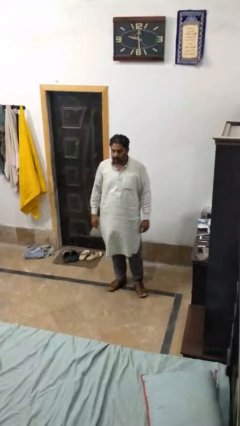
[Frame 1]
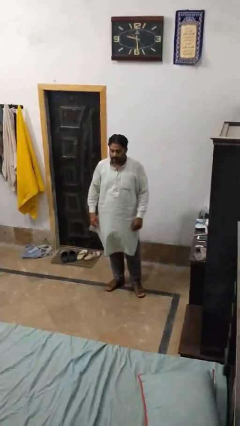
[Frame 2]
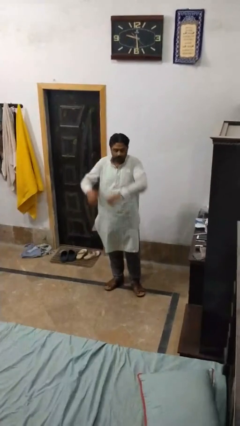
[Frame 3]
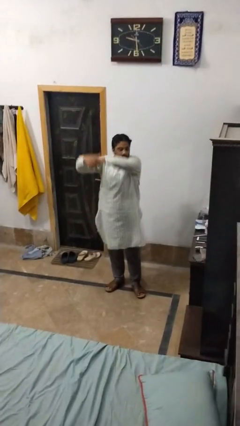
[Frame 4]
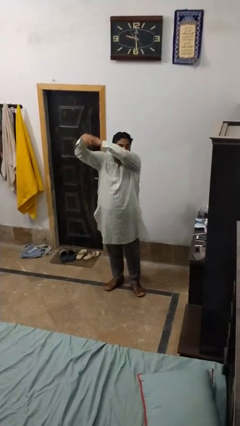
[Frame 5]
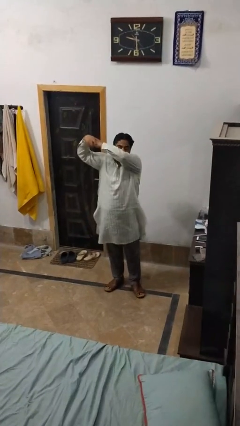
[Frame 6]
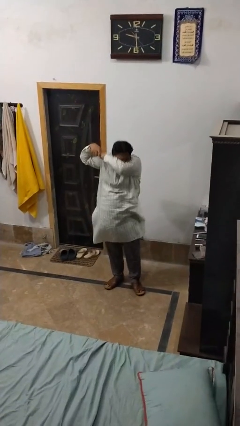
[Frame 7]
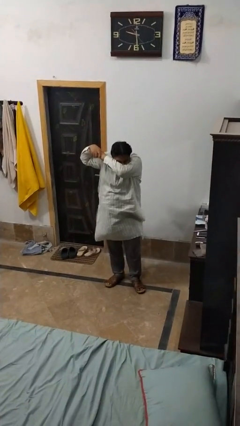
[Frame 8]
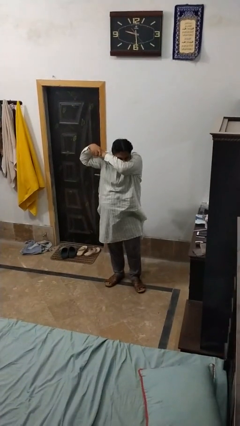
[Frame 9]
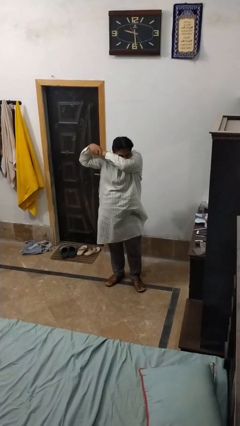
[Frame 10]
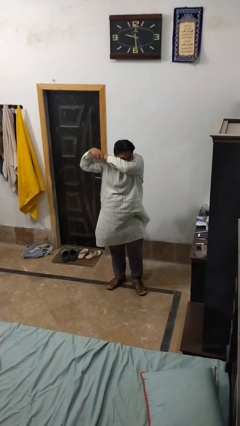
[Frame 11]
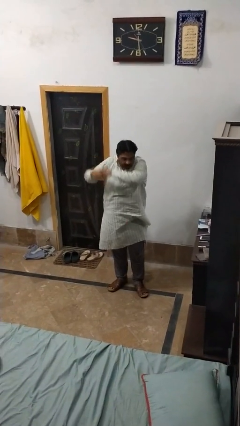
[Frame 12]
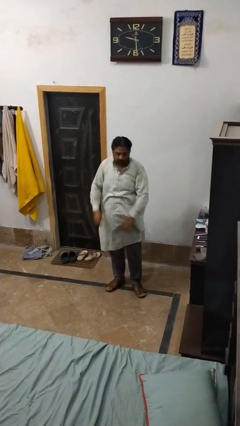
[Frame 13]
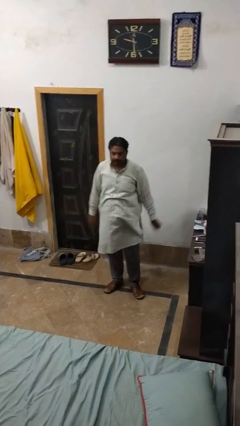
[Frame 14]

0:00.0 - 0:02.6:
person sneezes into arm

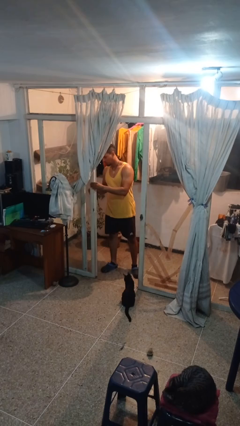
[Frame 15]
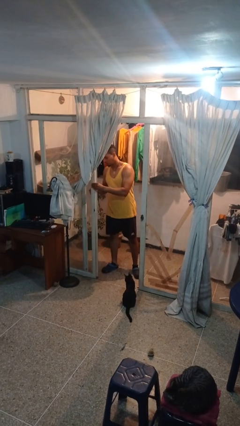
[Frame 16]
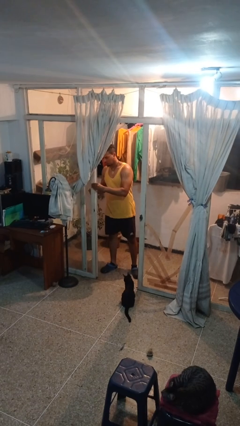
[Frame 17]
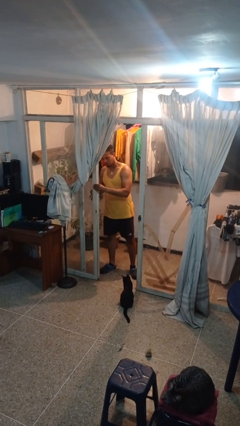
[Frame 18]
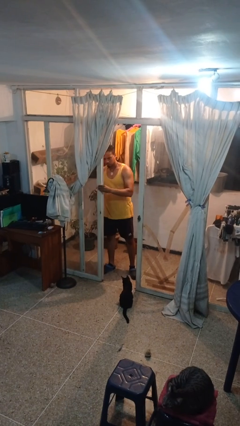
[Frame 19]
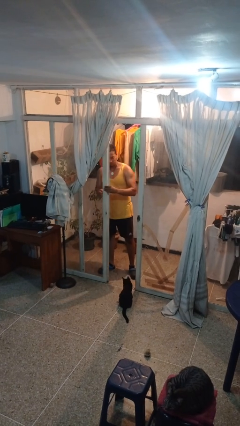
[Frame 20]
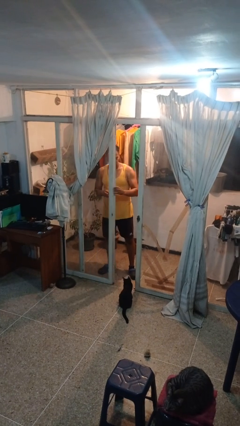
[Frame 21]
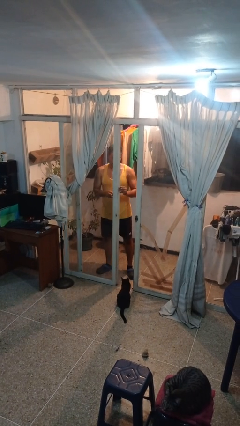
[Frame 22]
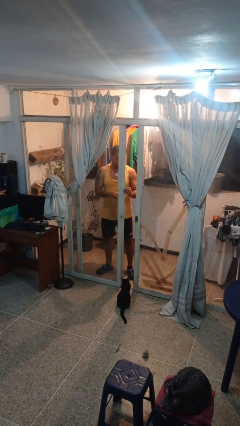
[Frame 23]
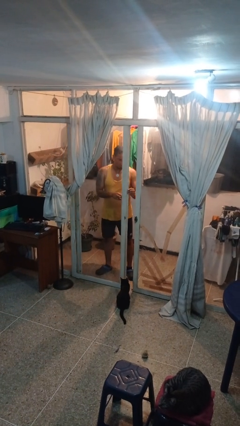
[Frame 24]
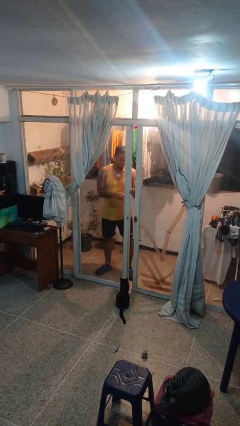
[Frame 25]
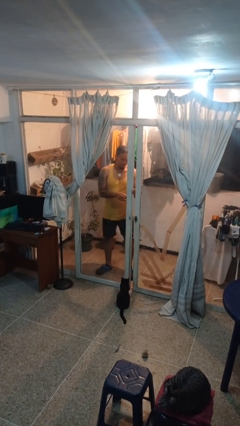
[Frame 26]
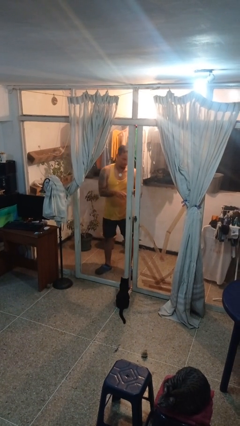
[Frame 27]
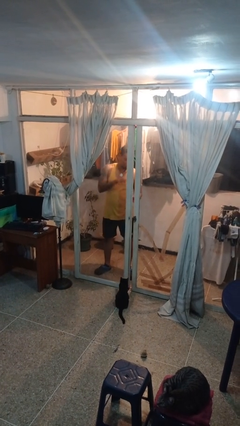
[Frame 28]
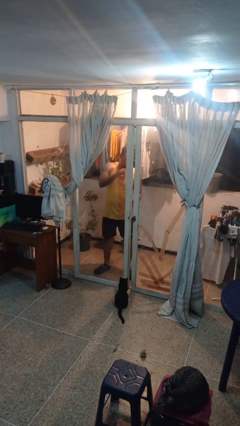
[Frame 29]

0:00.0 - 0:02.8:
person closes sliding door

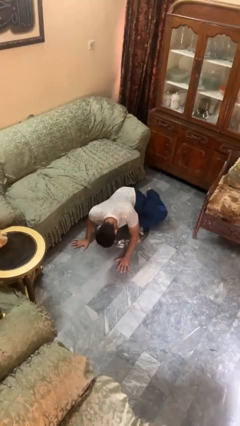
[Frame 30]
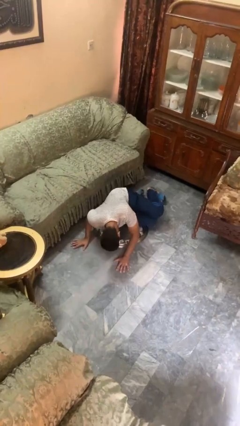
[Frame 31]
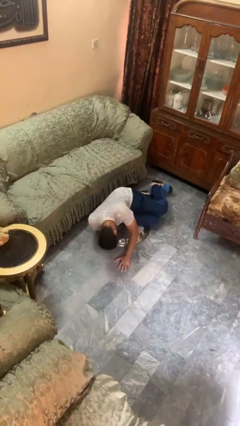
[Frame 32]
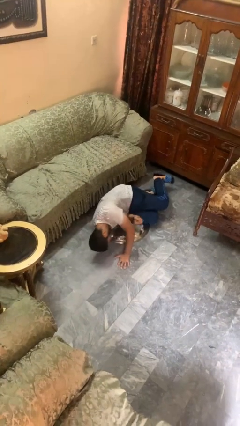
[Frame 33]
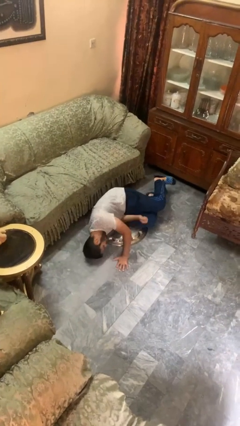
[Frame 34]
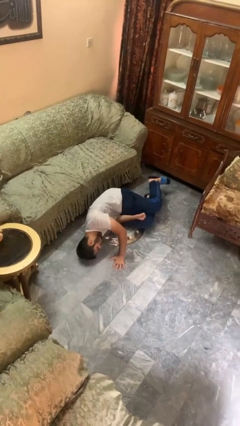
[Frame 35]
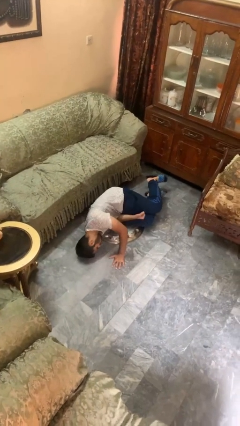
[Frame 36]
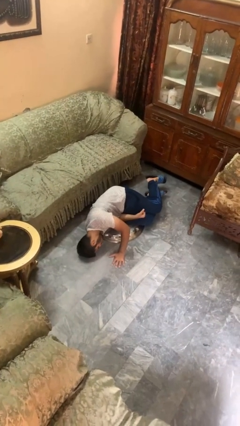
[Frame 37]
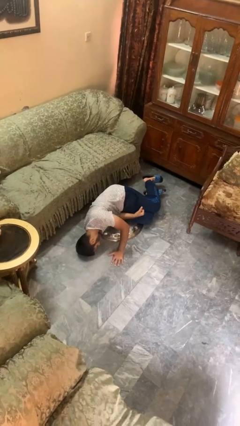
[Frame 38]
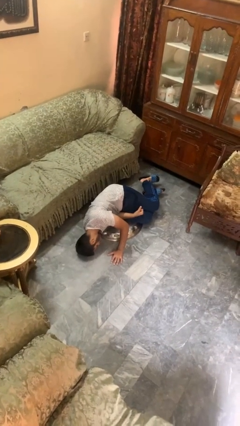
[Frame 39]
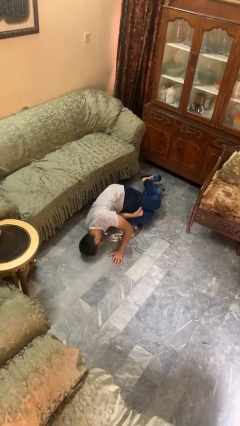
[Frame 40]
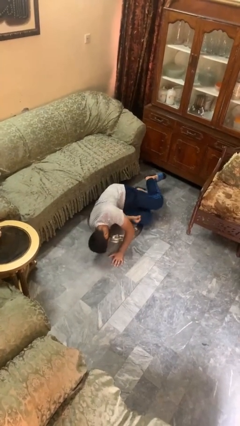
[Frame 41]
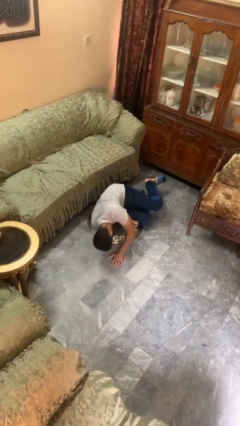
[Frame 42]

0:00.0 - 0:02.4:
person lies down on floor

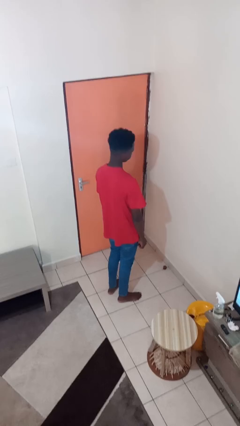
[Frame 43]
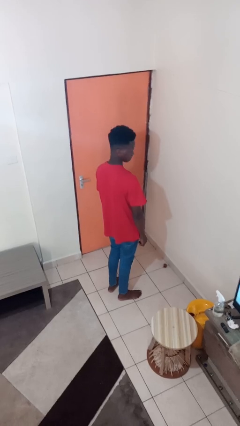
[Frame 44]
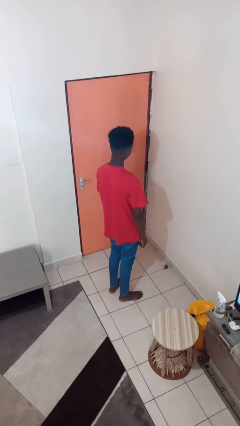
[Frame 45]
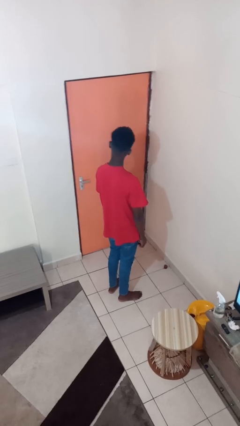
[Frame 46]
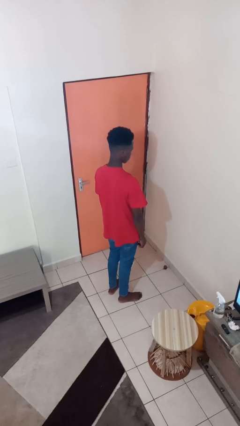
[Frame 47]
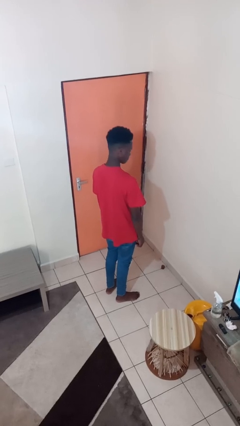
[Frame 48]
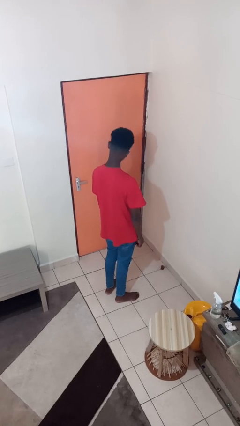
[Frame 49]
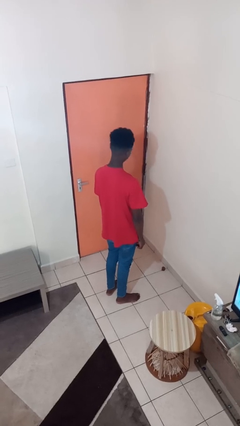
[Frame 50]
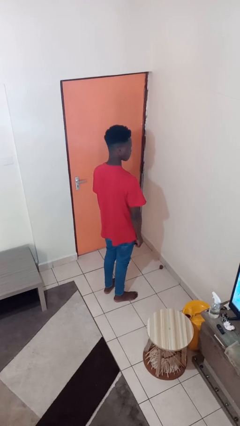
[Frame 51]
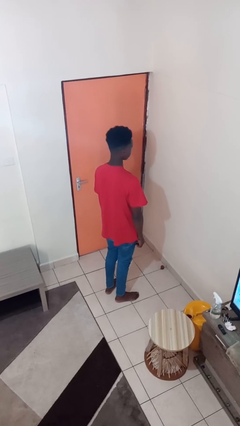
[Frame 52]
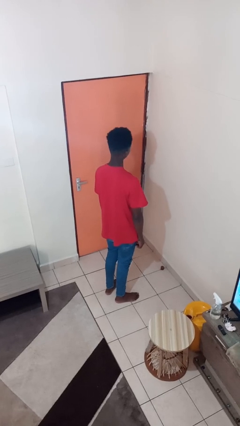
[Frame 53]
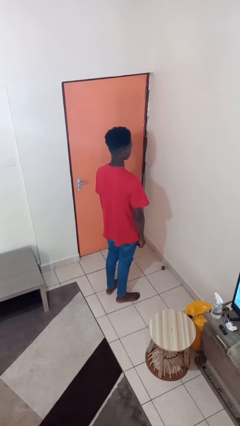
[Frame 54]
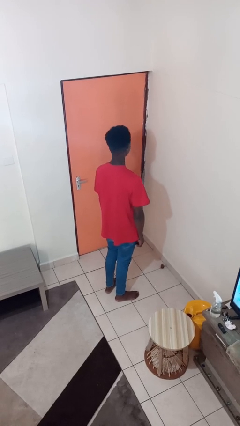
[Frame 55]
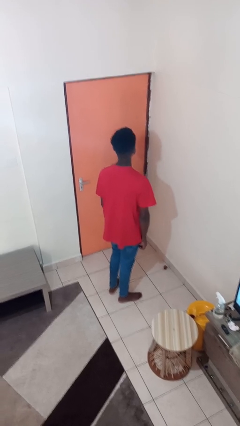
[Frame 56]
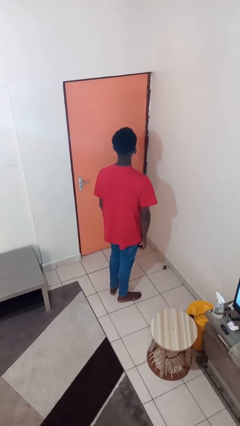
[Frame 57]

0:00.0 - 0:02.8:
person shakes head

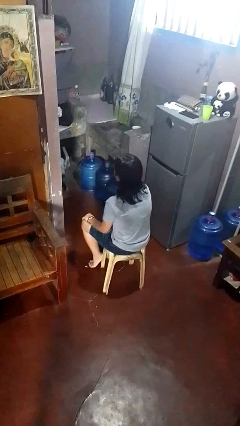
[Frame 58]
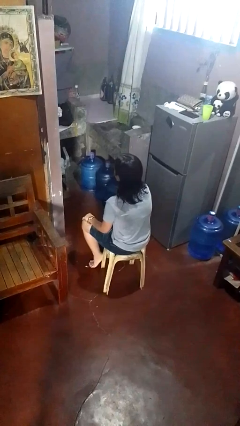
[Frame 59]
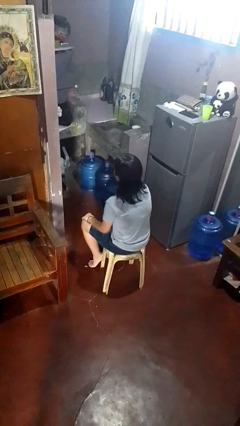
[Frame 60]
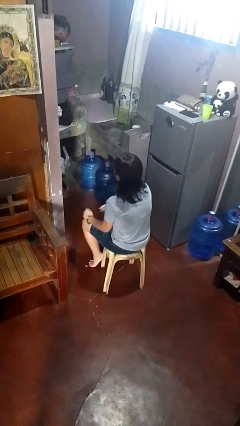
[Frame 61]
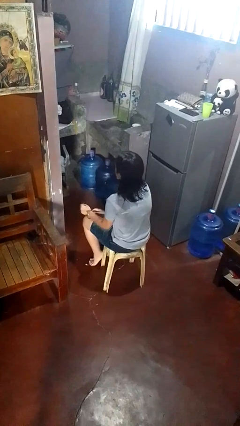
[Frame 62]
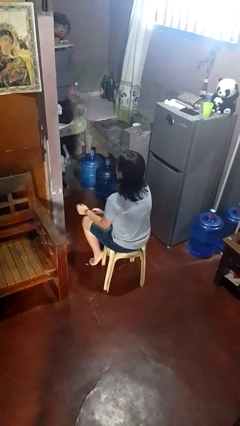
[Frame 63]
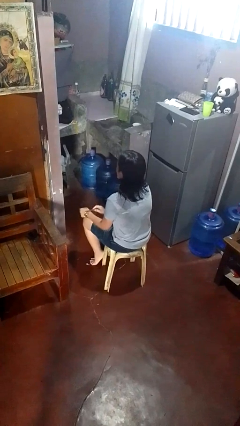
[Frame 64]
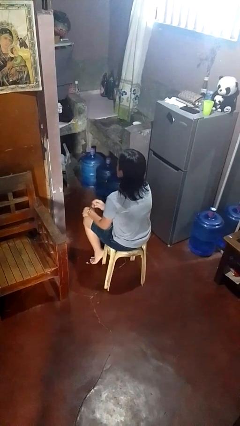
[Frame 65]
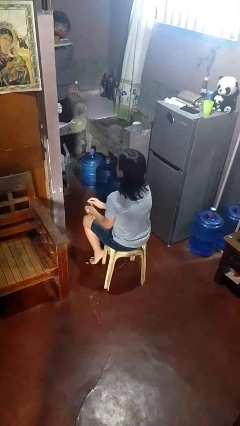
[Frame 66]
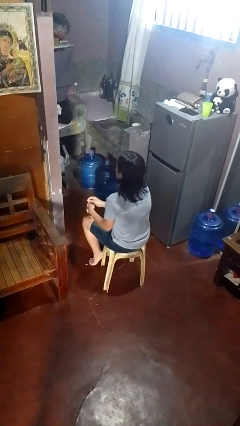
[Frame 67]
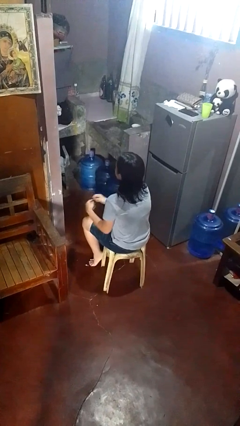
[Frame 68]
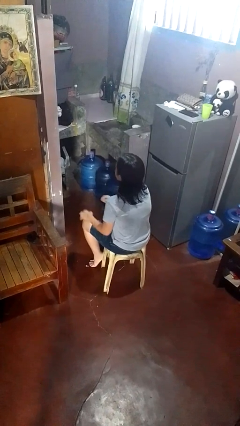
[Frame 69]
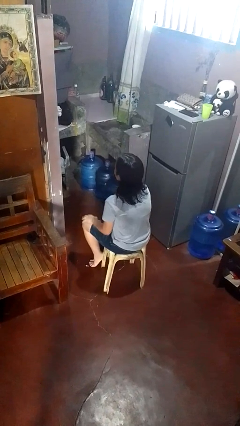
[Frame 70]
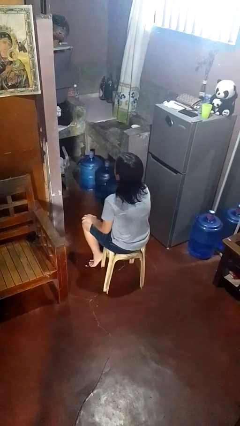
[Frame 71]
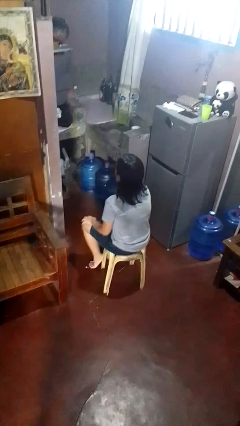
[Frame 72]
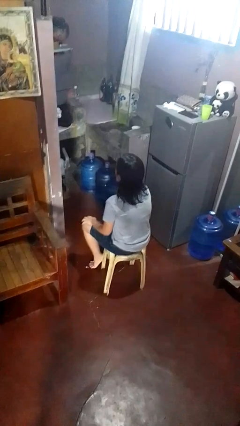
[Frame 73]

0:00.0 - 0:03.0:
person takes off wristwatch

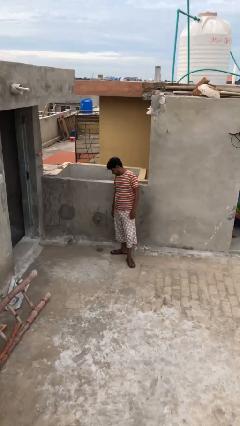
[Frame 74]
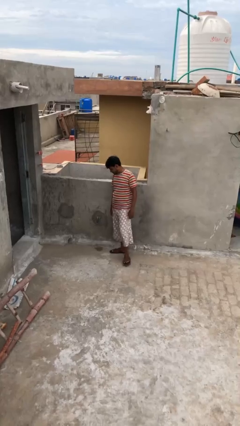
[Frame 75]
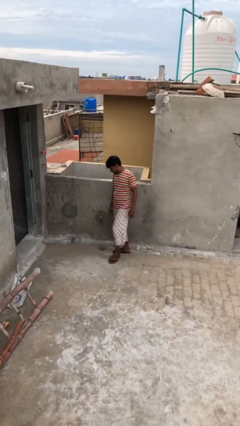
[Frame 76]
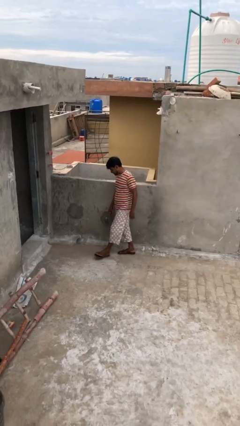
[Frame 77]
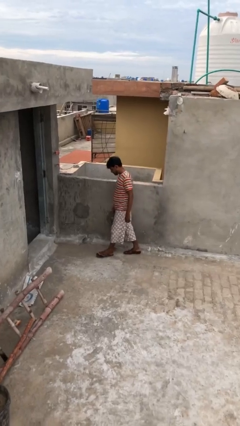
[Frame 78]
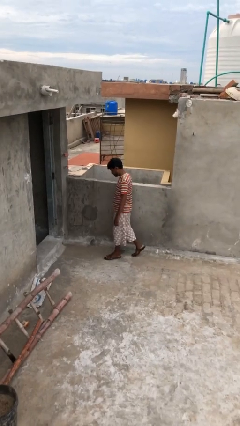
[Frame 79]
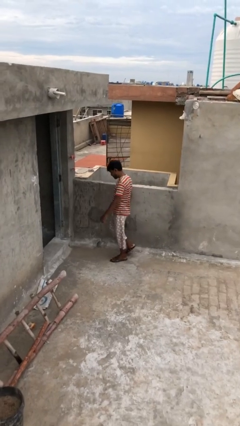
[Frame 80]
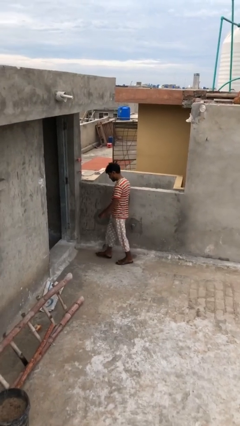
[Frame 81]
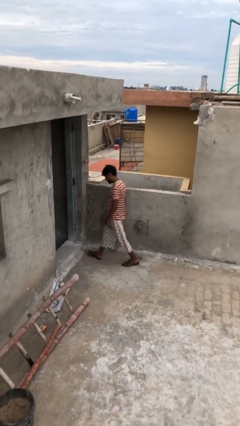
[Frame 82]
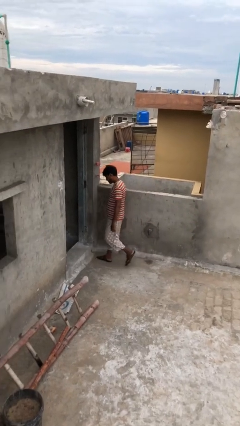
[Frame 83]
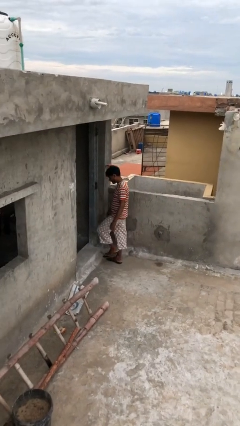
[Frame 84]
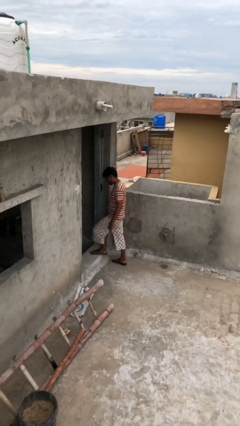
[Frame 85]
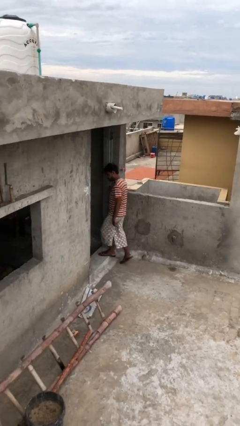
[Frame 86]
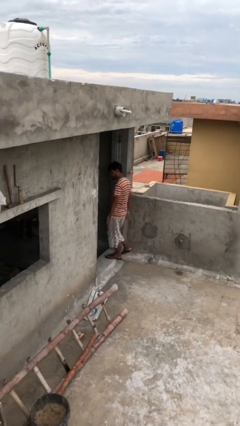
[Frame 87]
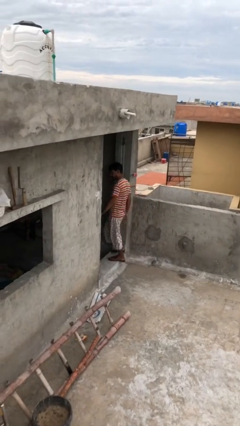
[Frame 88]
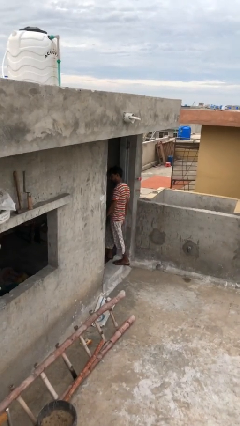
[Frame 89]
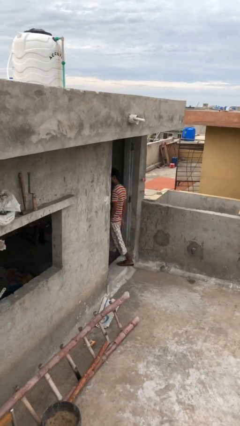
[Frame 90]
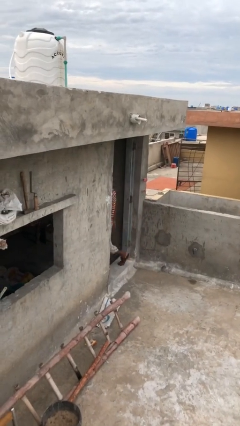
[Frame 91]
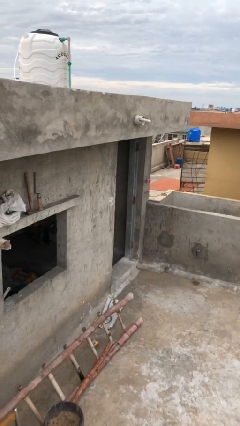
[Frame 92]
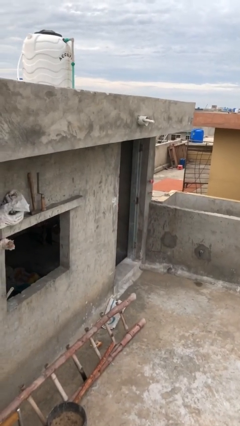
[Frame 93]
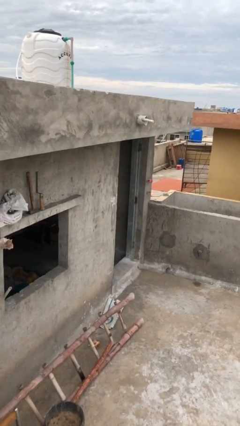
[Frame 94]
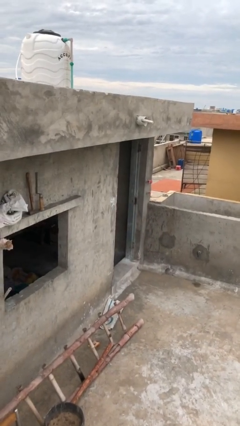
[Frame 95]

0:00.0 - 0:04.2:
person exits scene through structure
